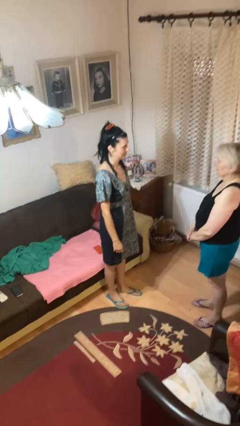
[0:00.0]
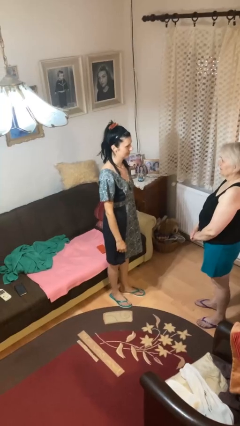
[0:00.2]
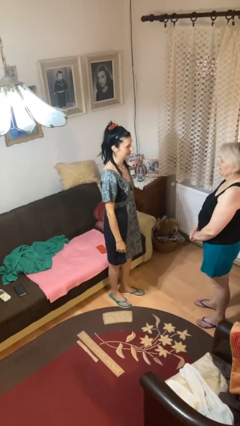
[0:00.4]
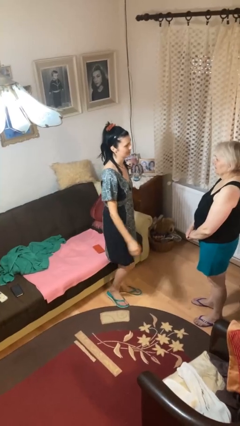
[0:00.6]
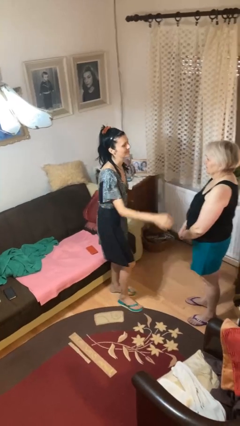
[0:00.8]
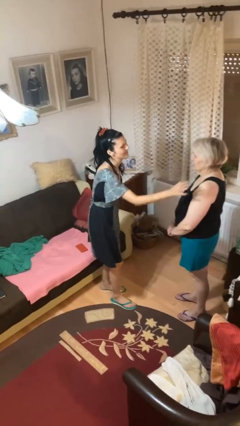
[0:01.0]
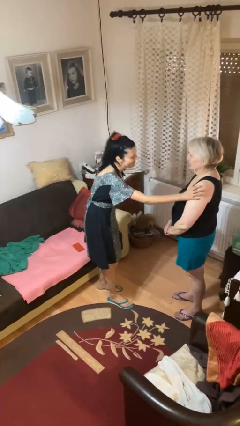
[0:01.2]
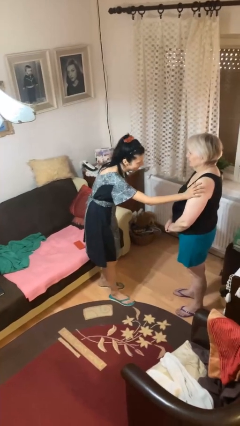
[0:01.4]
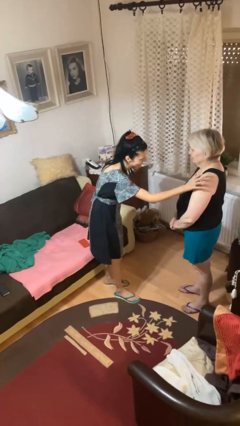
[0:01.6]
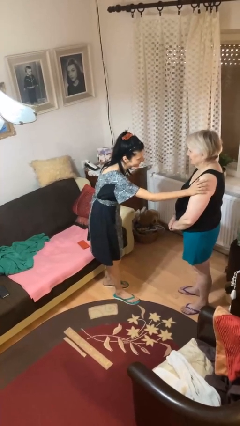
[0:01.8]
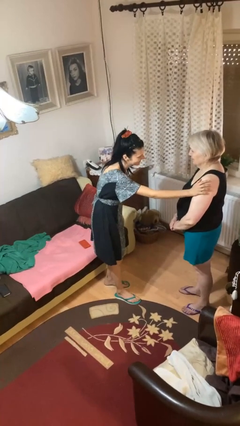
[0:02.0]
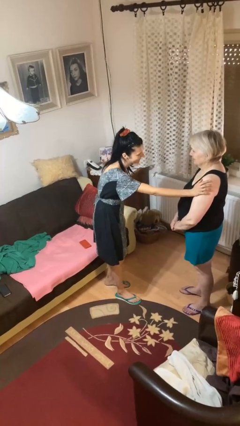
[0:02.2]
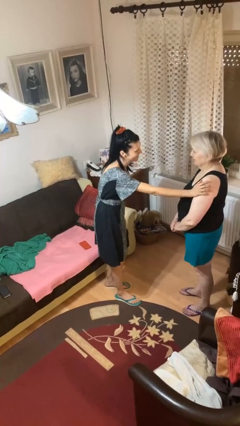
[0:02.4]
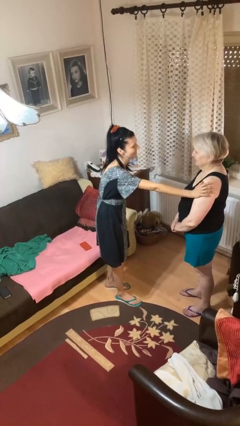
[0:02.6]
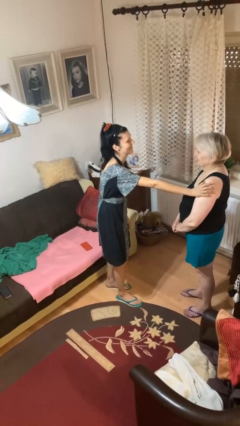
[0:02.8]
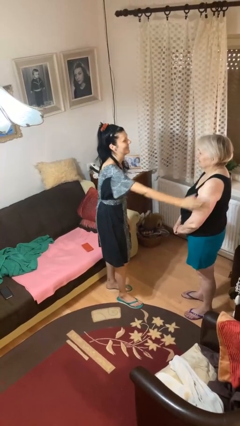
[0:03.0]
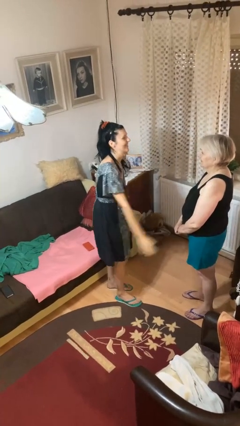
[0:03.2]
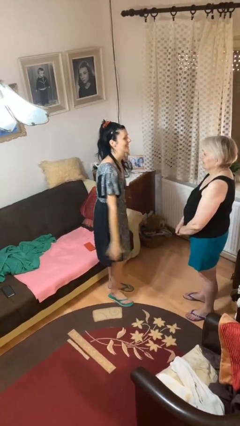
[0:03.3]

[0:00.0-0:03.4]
person pounds shoulders of person

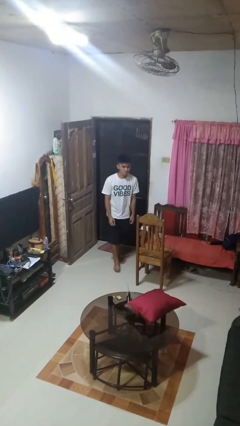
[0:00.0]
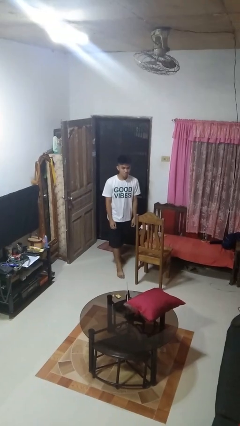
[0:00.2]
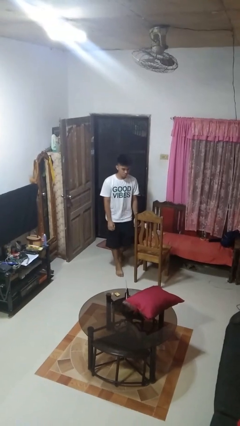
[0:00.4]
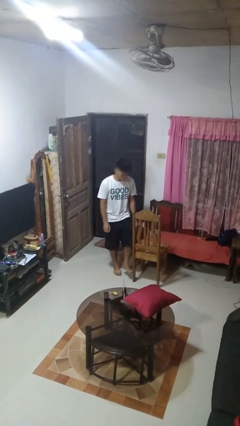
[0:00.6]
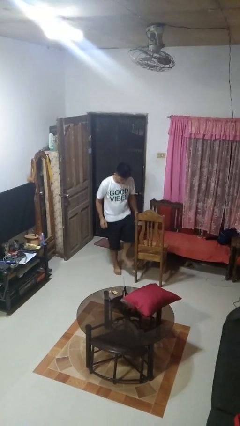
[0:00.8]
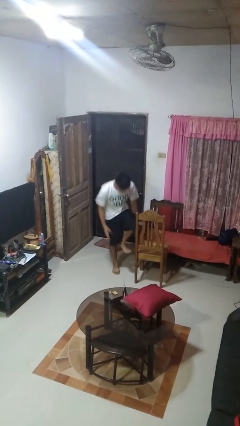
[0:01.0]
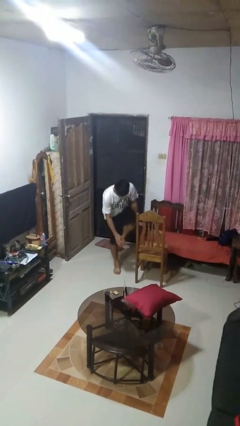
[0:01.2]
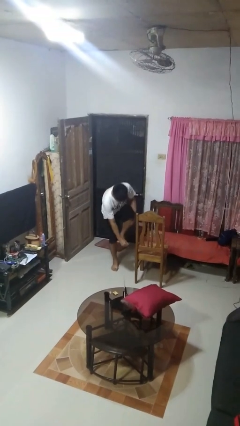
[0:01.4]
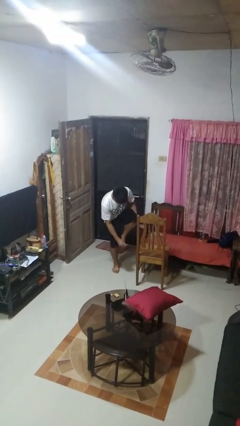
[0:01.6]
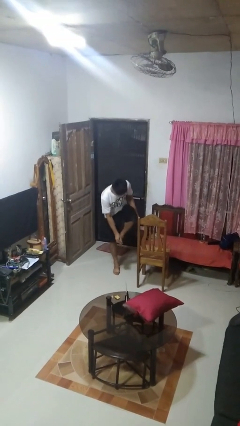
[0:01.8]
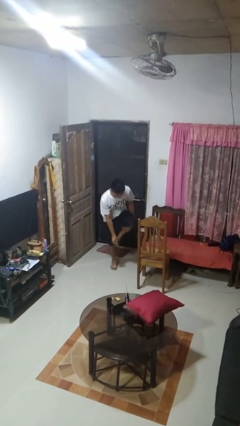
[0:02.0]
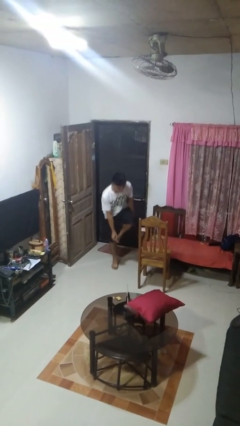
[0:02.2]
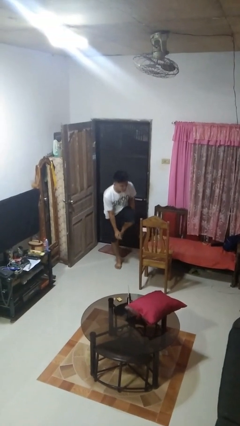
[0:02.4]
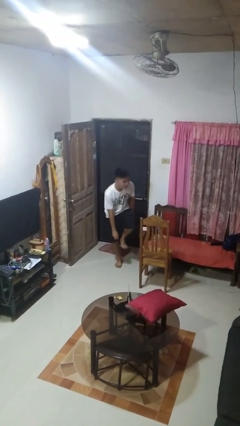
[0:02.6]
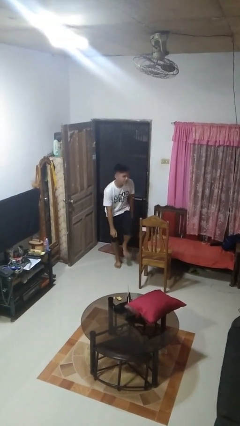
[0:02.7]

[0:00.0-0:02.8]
person stubs toe

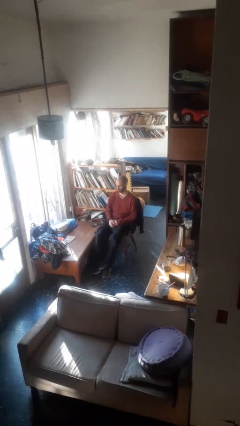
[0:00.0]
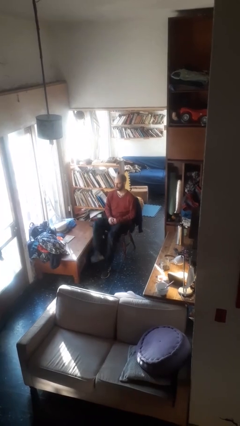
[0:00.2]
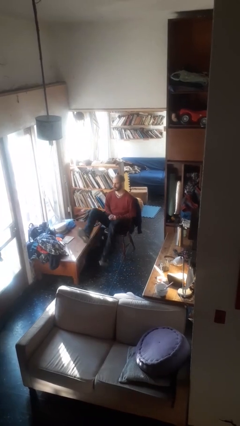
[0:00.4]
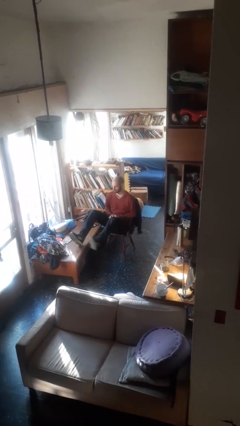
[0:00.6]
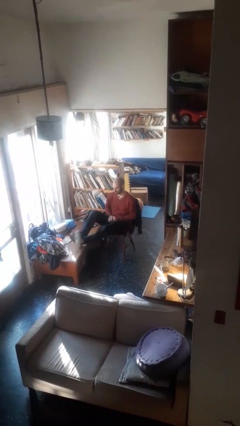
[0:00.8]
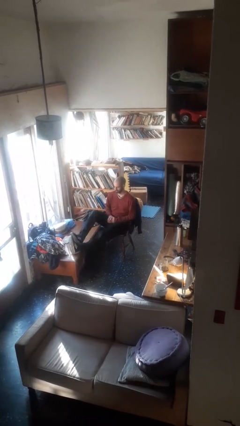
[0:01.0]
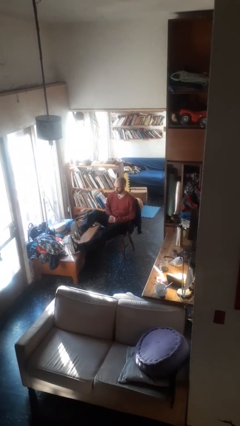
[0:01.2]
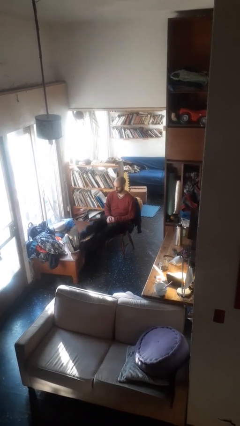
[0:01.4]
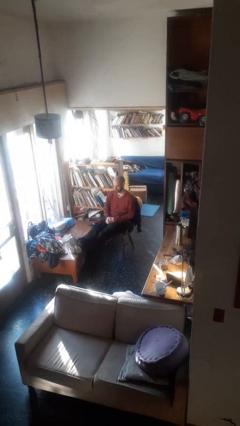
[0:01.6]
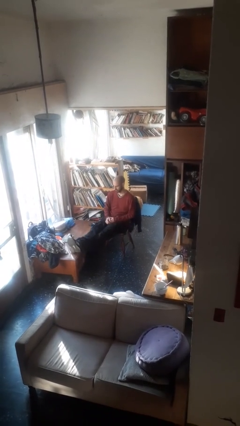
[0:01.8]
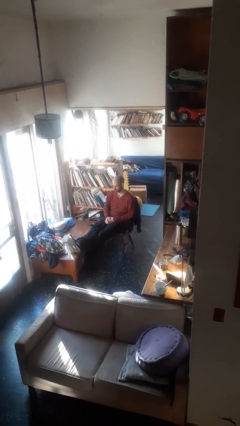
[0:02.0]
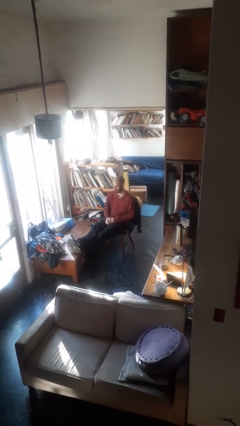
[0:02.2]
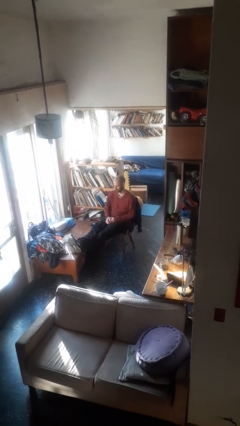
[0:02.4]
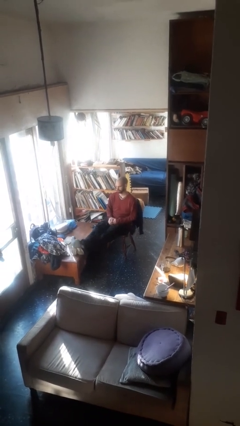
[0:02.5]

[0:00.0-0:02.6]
person puts feet up

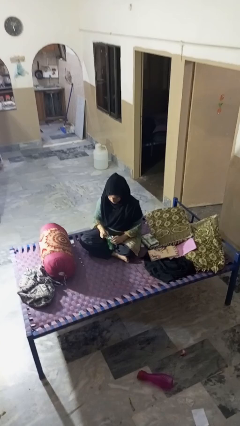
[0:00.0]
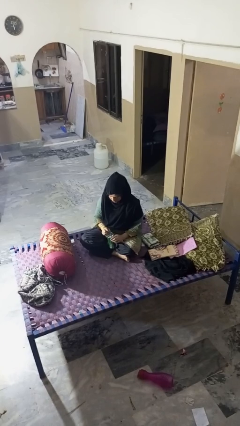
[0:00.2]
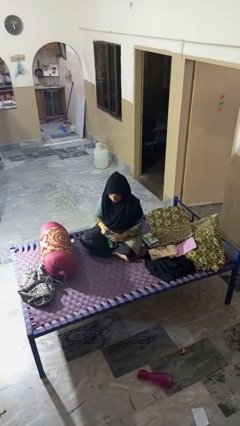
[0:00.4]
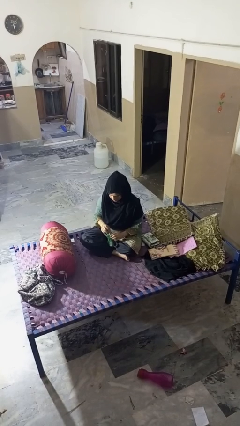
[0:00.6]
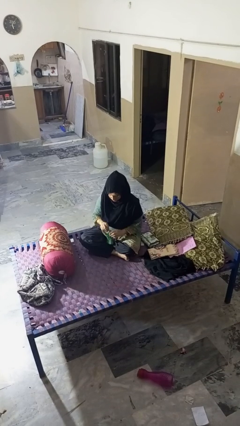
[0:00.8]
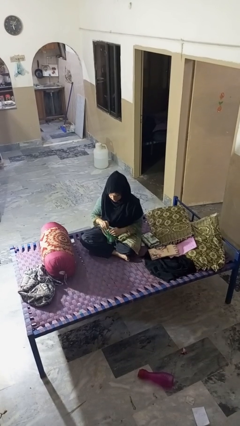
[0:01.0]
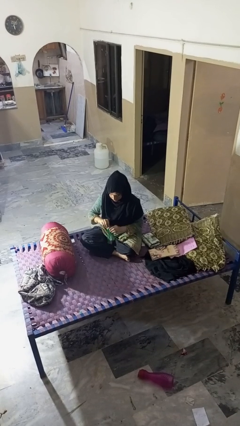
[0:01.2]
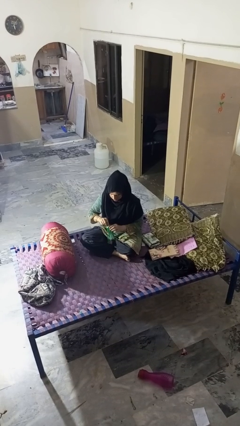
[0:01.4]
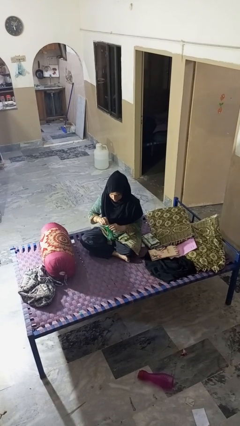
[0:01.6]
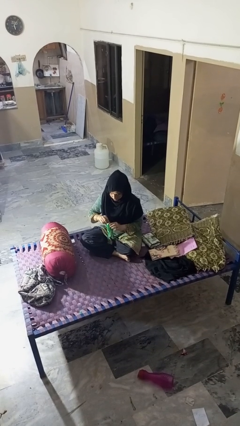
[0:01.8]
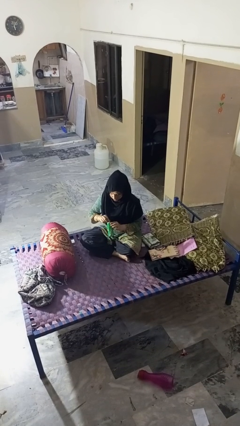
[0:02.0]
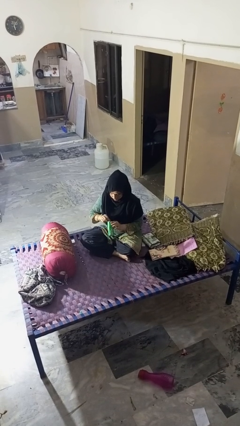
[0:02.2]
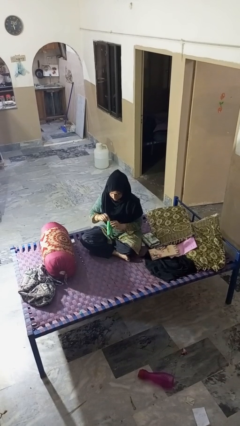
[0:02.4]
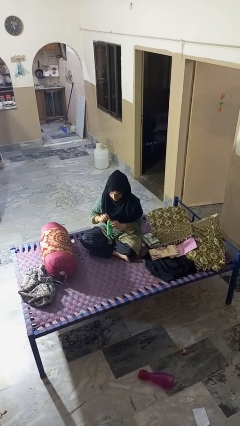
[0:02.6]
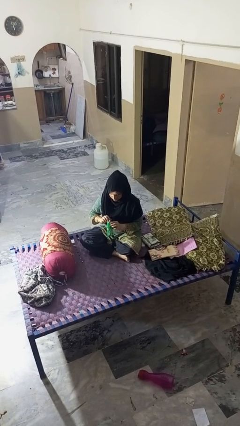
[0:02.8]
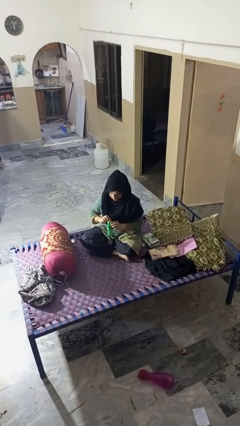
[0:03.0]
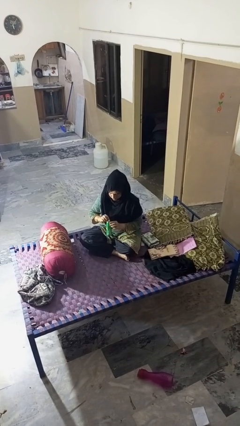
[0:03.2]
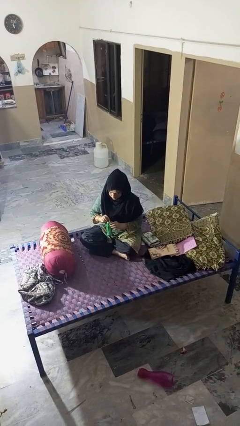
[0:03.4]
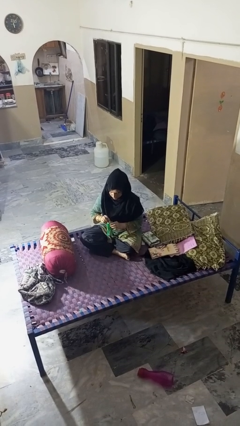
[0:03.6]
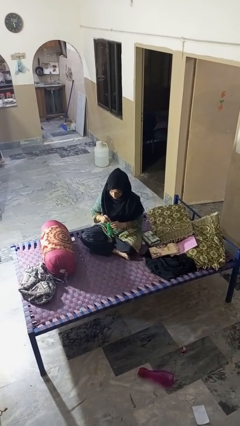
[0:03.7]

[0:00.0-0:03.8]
person opens can with can opener

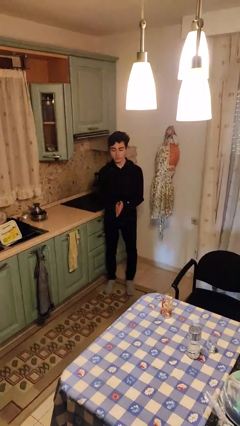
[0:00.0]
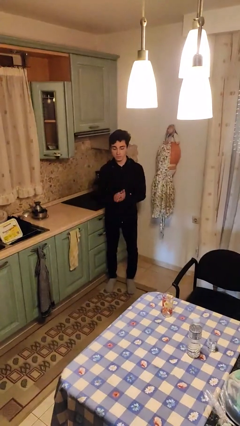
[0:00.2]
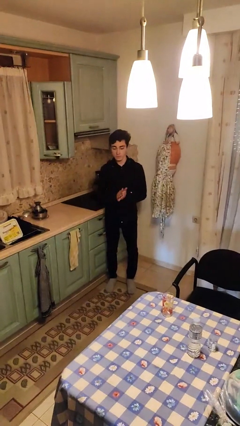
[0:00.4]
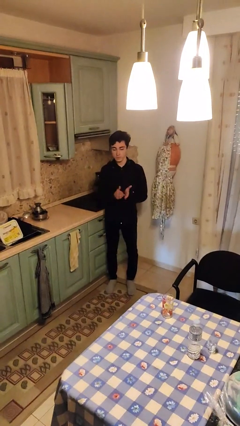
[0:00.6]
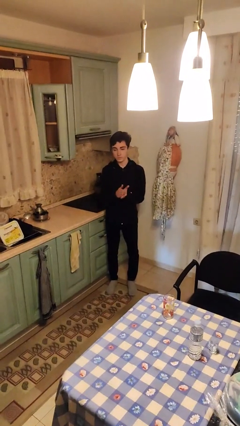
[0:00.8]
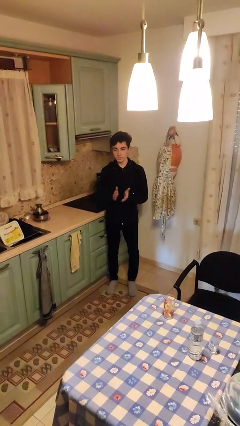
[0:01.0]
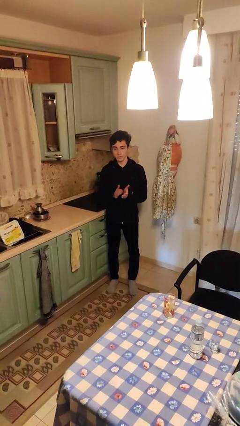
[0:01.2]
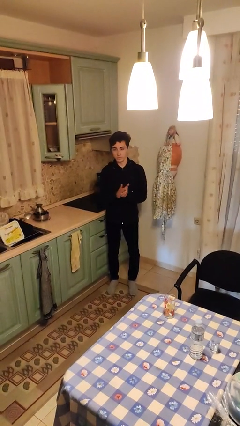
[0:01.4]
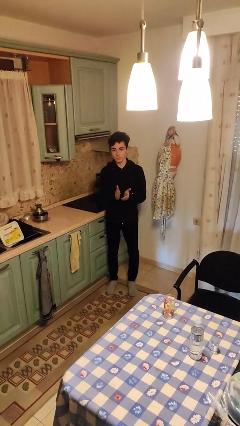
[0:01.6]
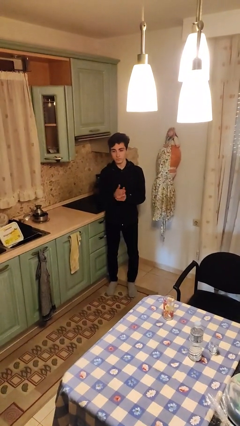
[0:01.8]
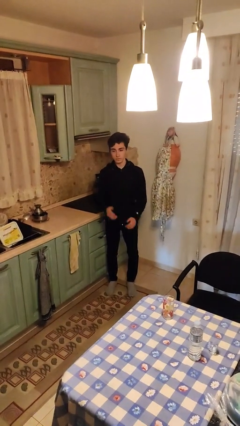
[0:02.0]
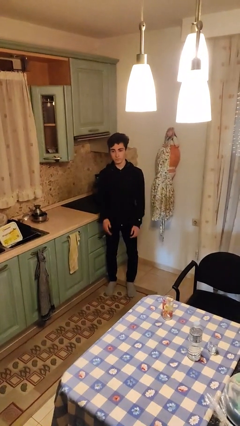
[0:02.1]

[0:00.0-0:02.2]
person claps hands

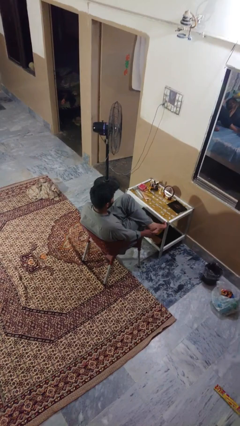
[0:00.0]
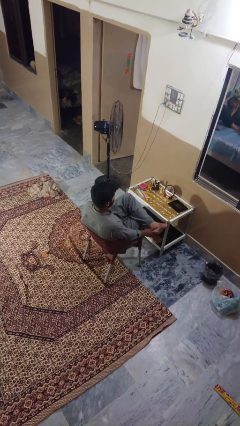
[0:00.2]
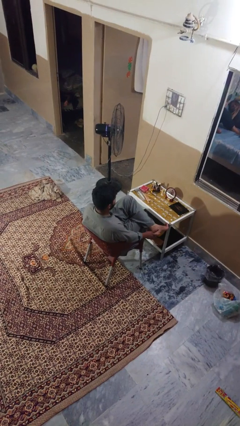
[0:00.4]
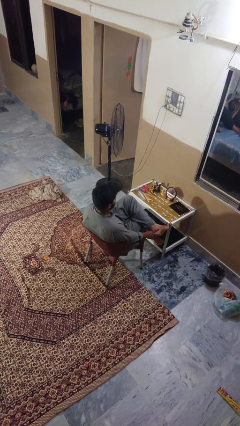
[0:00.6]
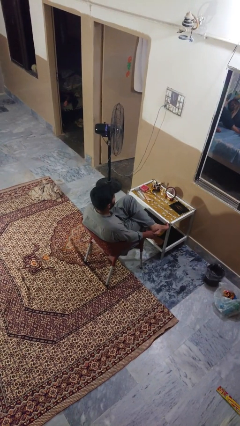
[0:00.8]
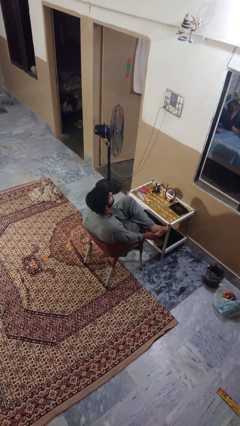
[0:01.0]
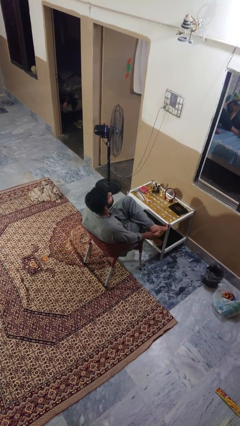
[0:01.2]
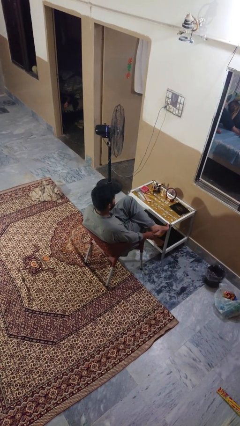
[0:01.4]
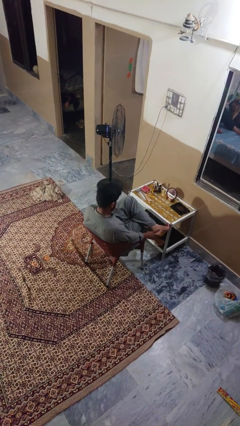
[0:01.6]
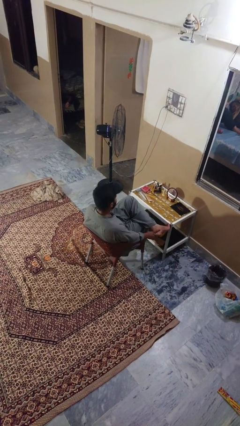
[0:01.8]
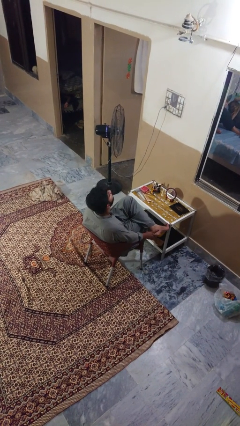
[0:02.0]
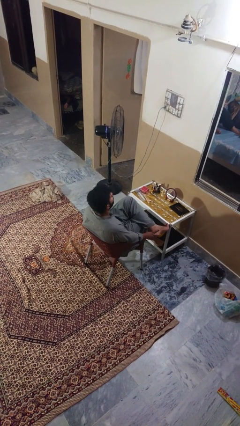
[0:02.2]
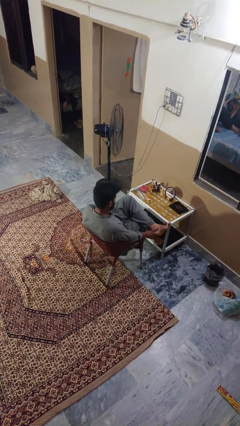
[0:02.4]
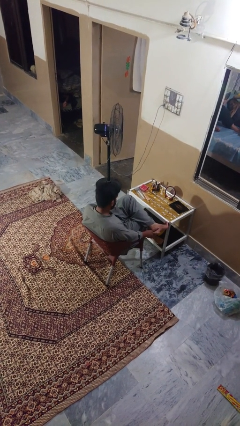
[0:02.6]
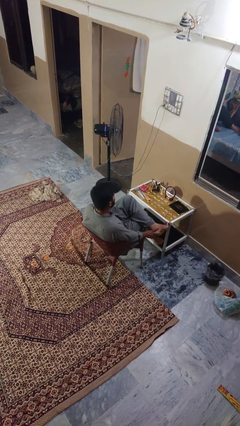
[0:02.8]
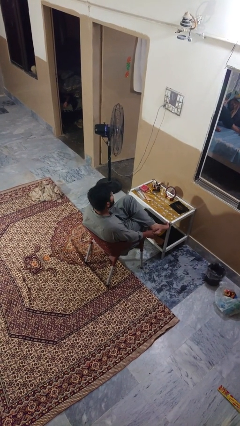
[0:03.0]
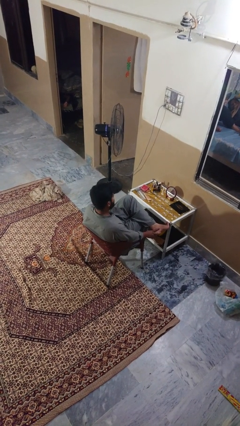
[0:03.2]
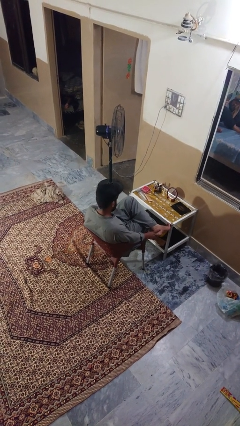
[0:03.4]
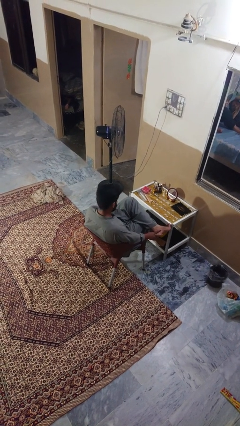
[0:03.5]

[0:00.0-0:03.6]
person nods head
